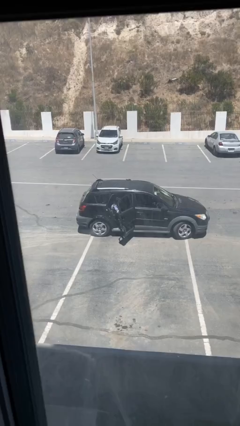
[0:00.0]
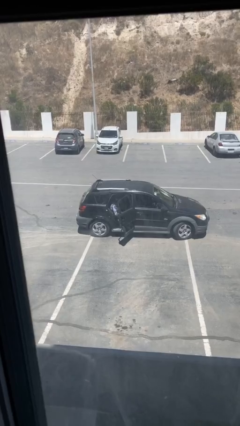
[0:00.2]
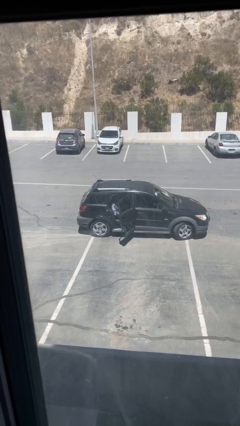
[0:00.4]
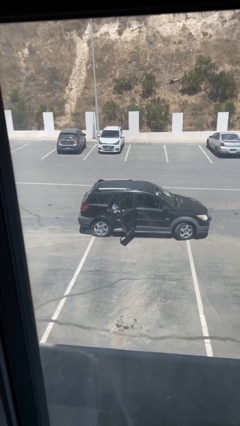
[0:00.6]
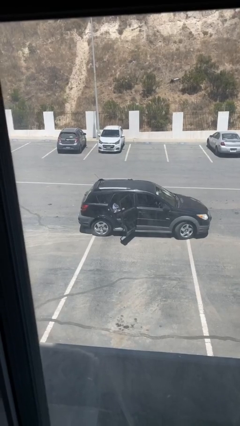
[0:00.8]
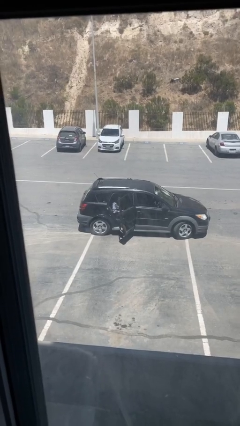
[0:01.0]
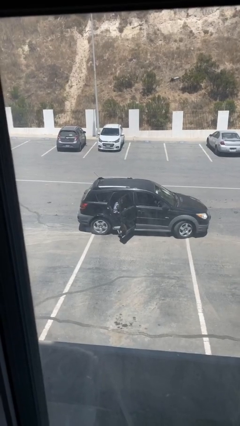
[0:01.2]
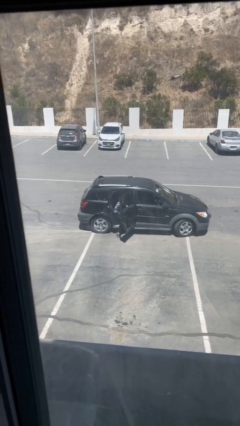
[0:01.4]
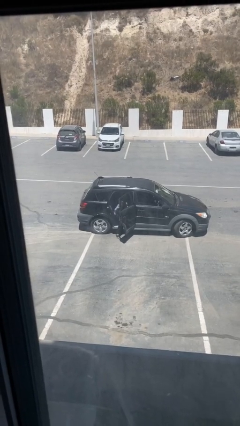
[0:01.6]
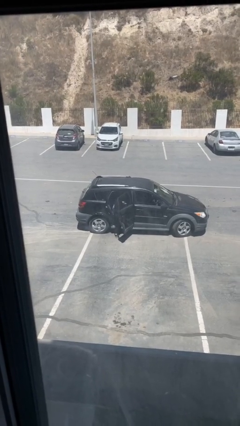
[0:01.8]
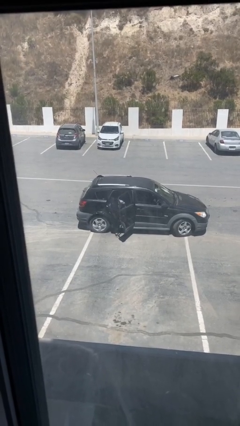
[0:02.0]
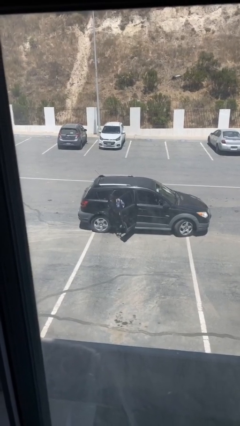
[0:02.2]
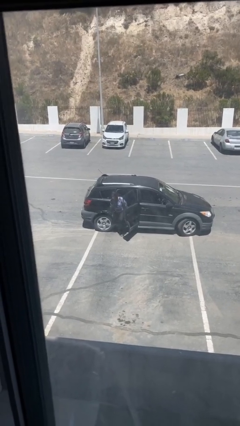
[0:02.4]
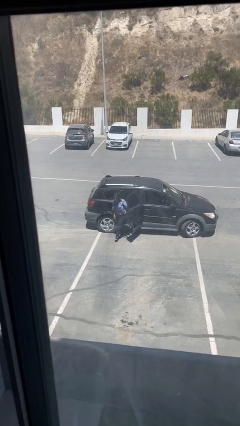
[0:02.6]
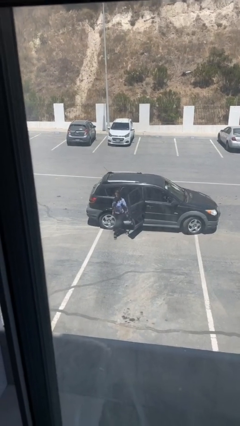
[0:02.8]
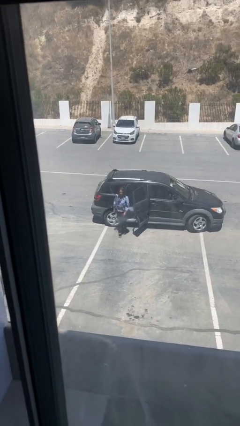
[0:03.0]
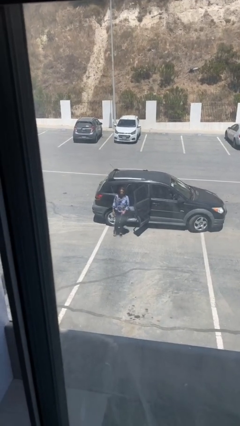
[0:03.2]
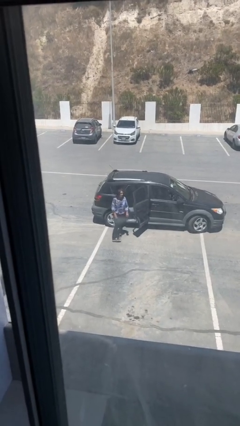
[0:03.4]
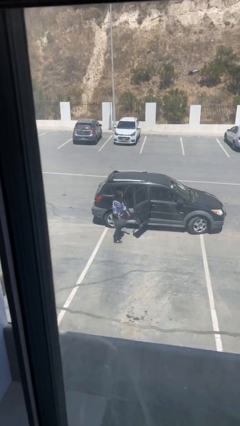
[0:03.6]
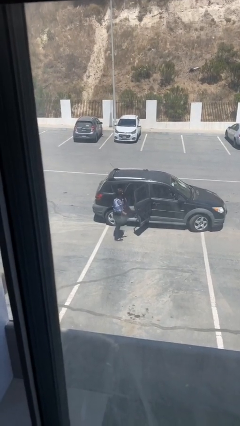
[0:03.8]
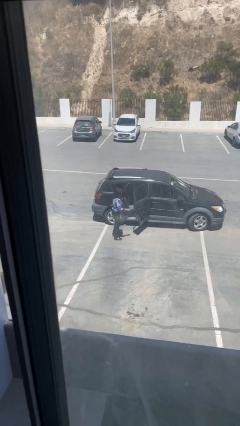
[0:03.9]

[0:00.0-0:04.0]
person exits car

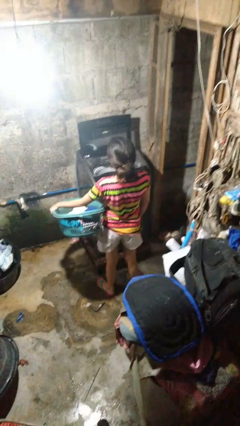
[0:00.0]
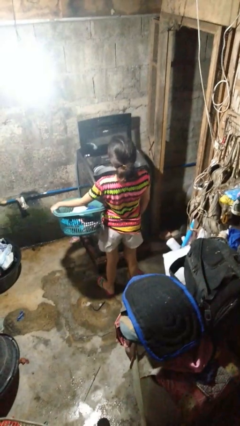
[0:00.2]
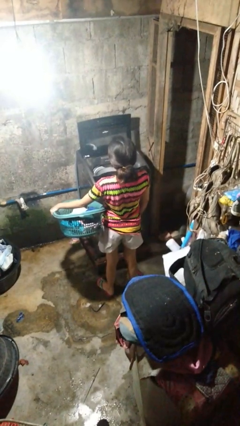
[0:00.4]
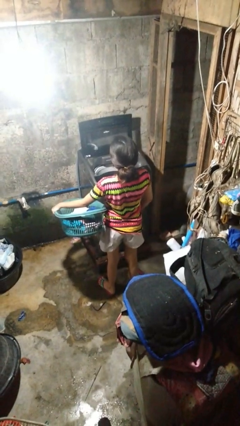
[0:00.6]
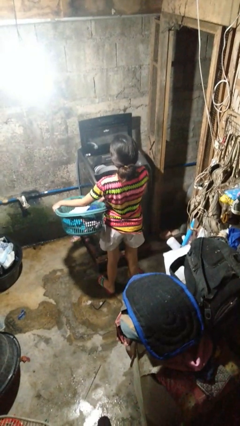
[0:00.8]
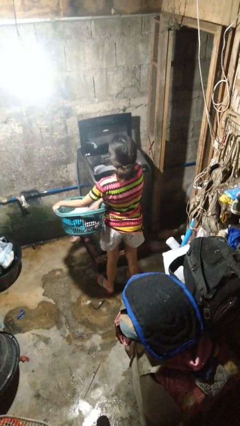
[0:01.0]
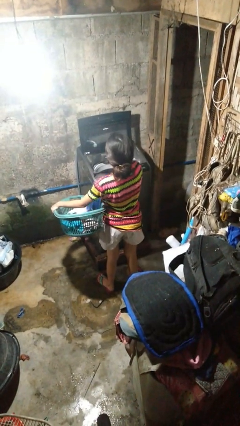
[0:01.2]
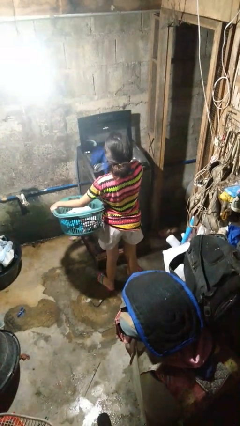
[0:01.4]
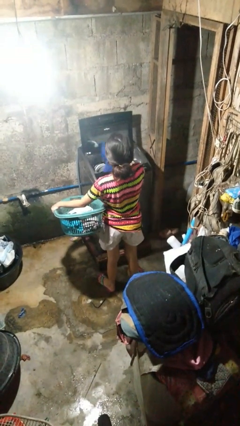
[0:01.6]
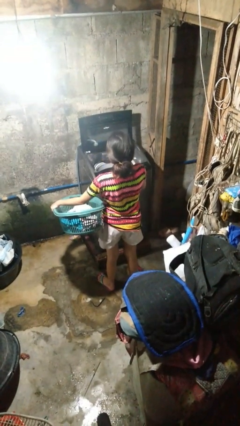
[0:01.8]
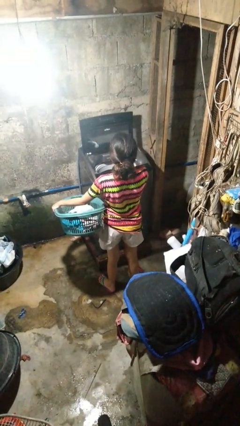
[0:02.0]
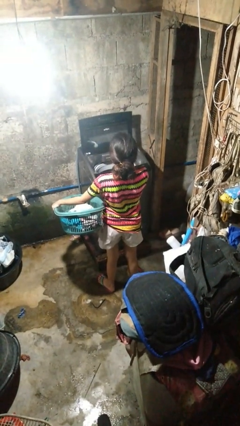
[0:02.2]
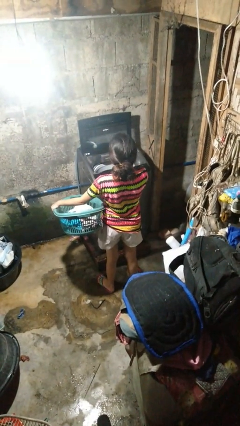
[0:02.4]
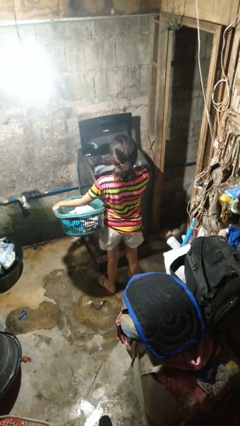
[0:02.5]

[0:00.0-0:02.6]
person loads clotheswasher

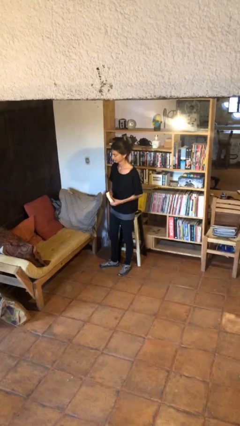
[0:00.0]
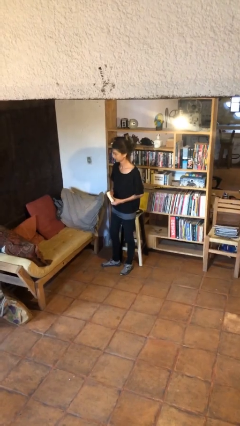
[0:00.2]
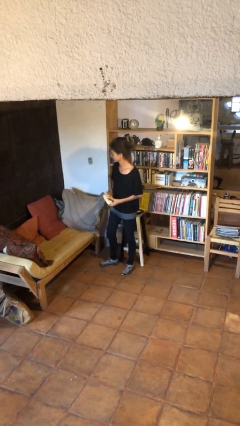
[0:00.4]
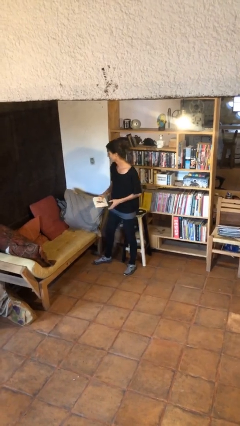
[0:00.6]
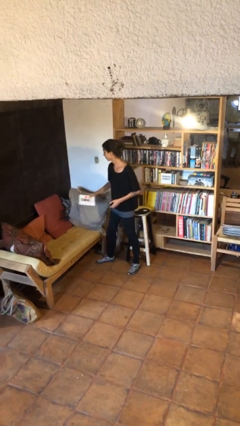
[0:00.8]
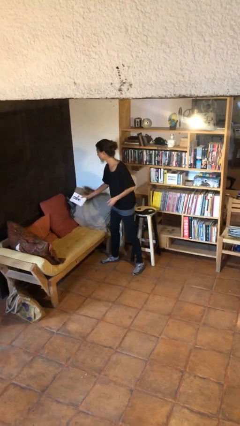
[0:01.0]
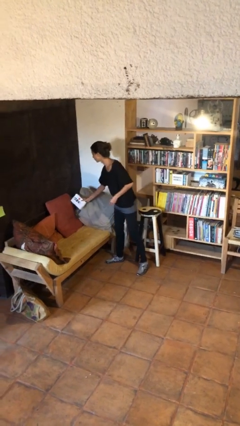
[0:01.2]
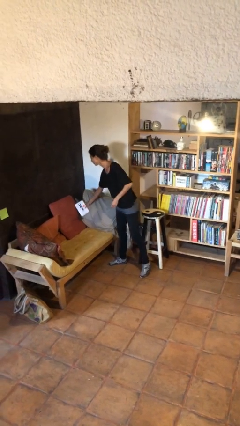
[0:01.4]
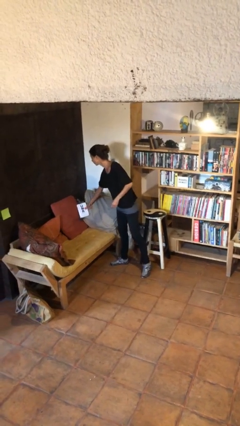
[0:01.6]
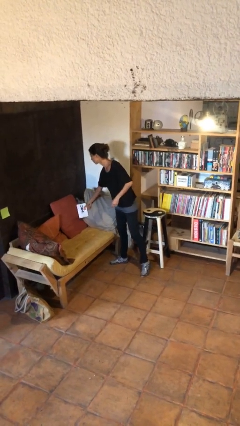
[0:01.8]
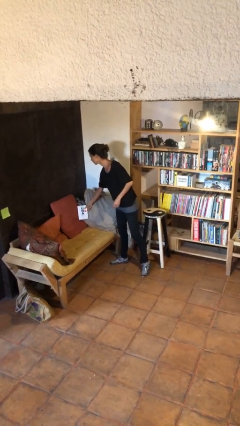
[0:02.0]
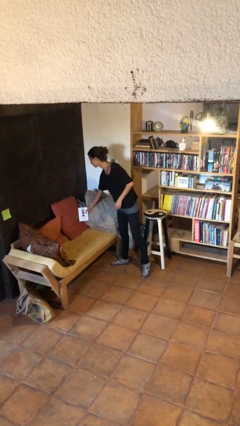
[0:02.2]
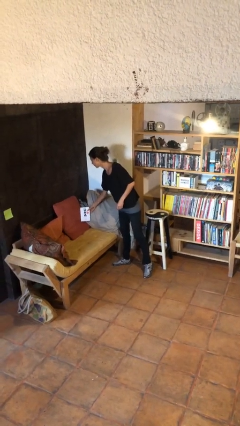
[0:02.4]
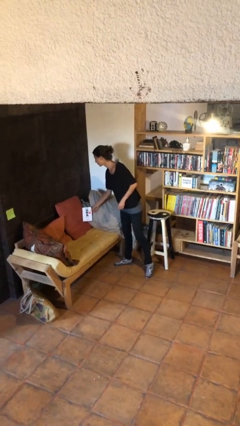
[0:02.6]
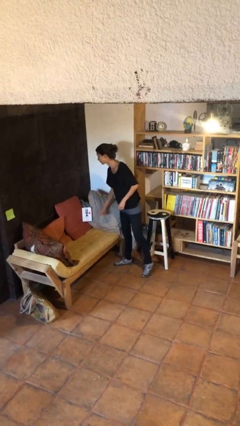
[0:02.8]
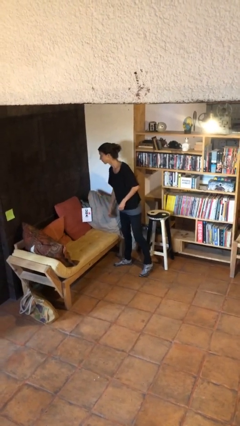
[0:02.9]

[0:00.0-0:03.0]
person puts down object on couch

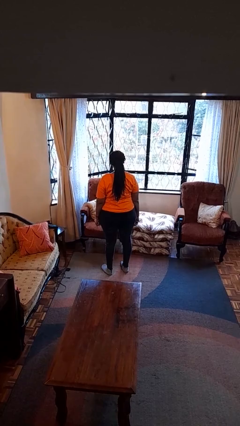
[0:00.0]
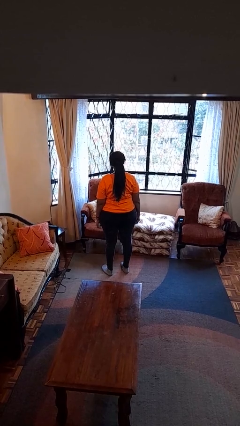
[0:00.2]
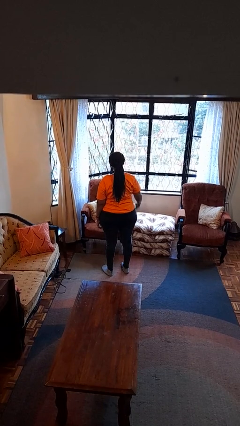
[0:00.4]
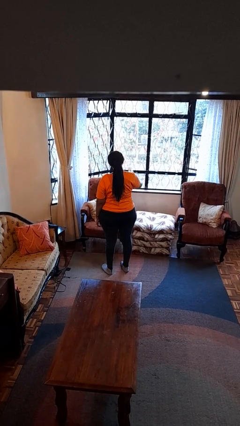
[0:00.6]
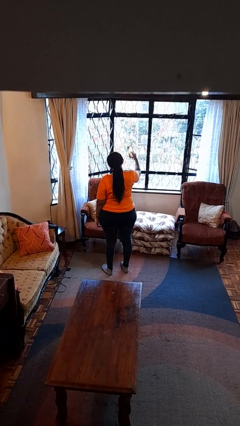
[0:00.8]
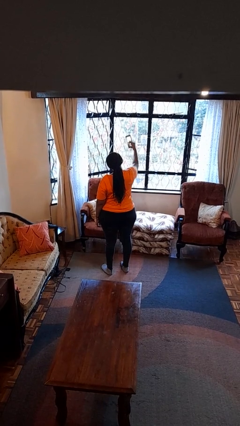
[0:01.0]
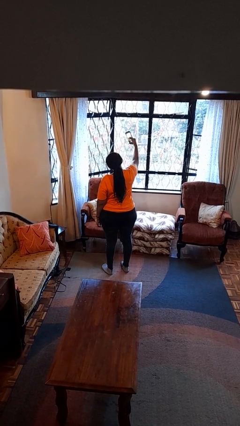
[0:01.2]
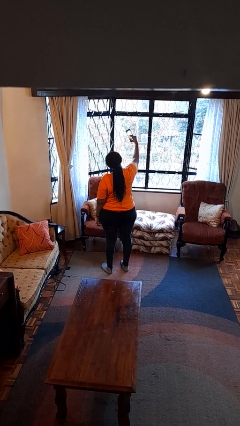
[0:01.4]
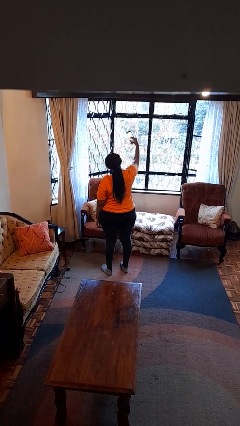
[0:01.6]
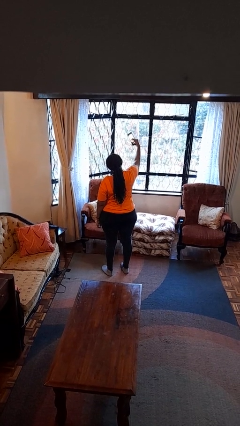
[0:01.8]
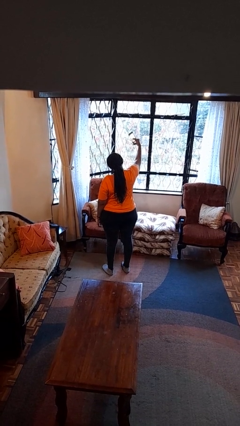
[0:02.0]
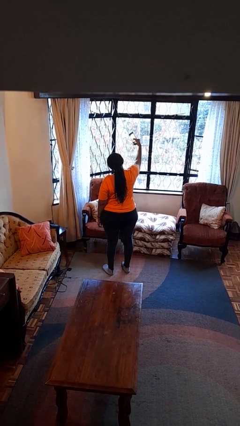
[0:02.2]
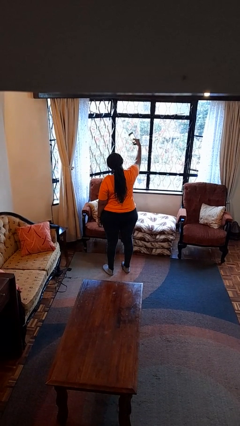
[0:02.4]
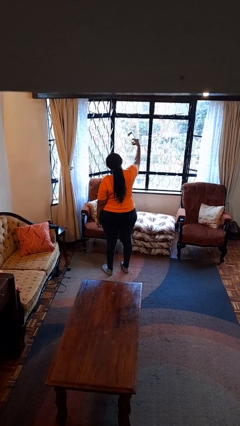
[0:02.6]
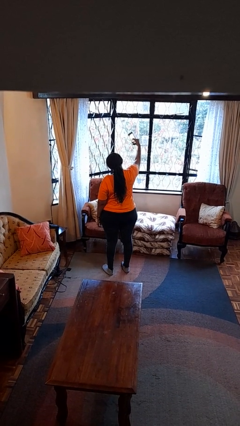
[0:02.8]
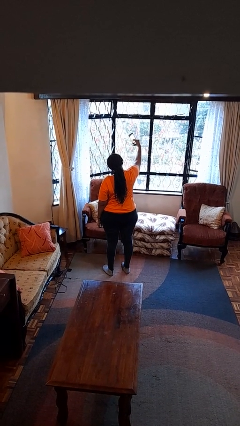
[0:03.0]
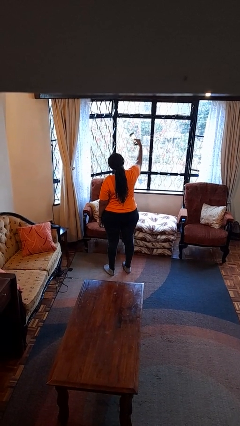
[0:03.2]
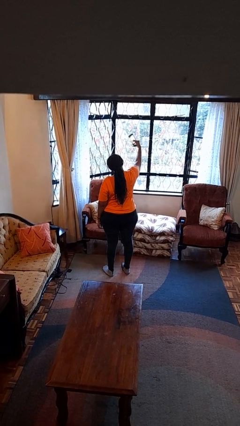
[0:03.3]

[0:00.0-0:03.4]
person takes selfie

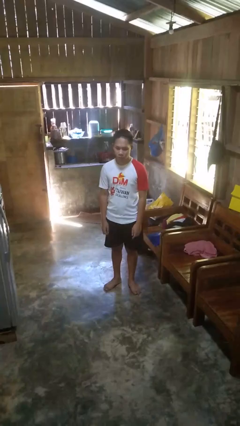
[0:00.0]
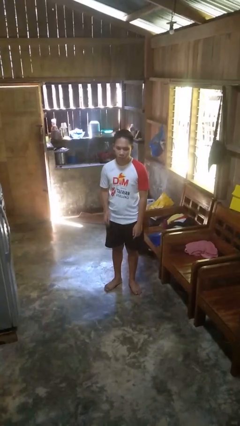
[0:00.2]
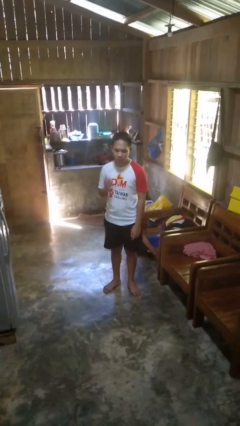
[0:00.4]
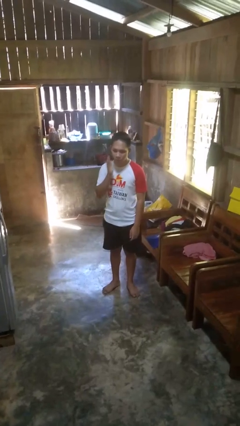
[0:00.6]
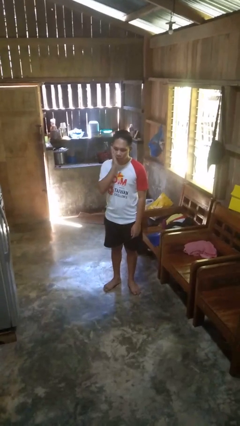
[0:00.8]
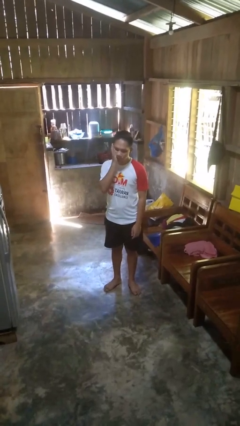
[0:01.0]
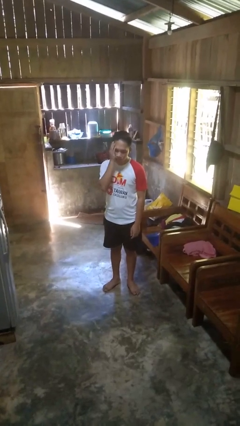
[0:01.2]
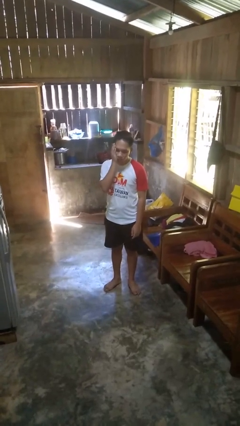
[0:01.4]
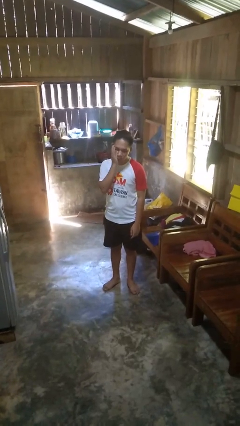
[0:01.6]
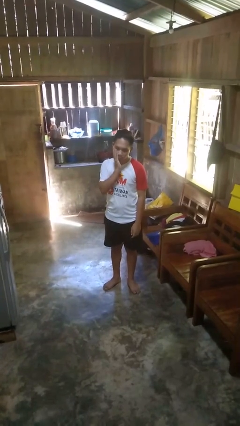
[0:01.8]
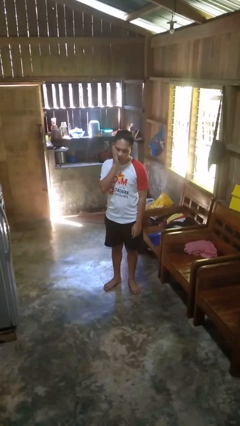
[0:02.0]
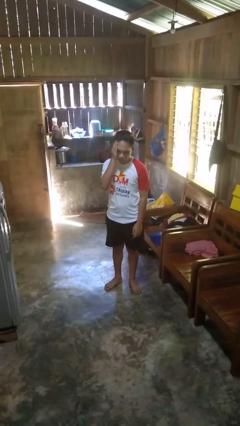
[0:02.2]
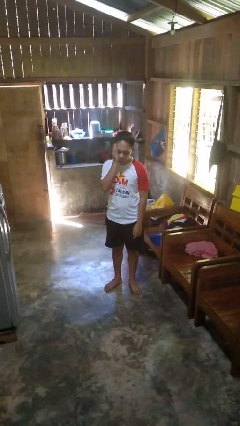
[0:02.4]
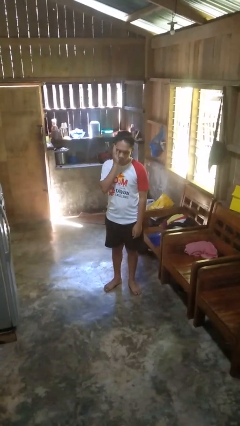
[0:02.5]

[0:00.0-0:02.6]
person scratches face

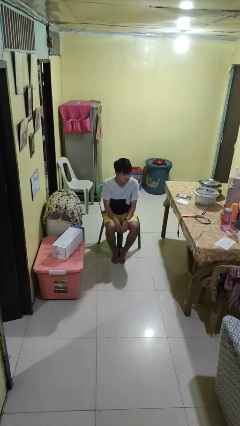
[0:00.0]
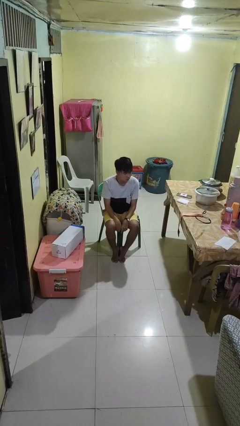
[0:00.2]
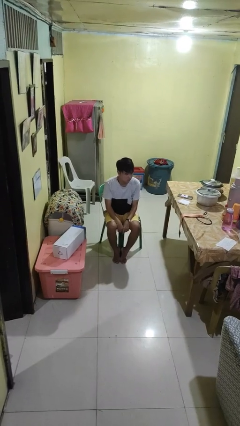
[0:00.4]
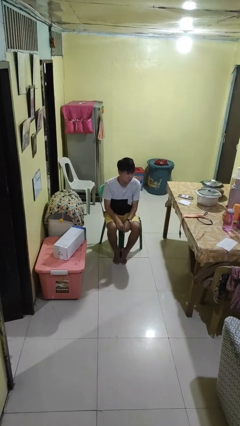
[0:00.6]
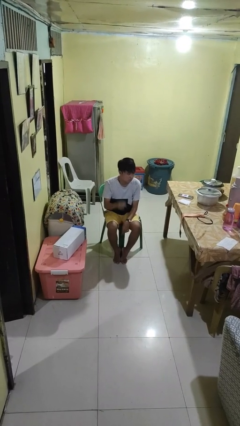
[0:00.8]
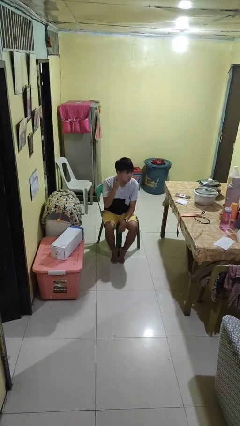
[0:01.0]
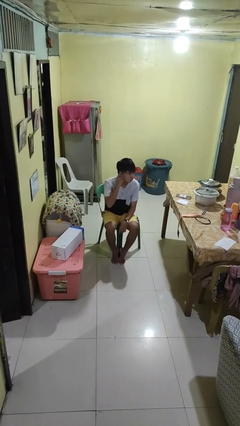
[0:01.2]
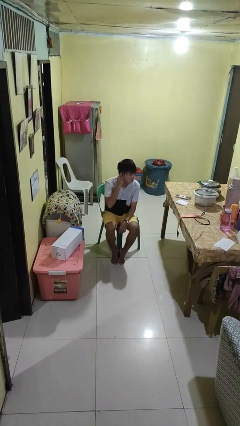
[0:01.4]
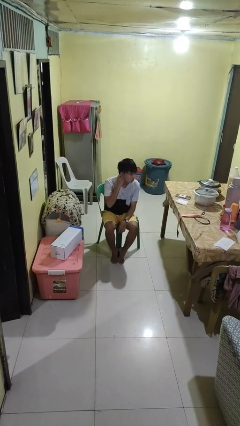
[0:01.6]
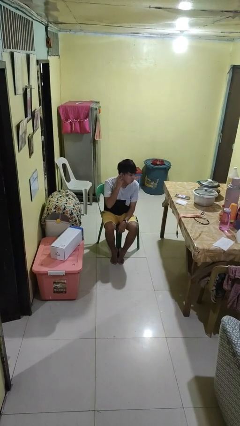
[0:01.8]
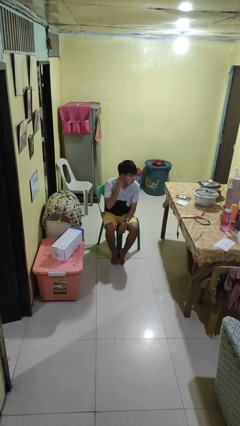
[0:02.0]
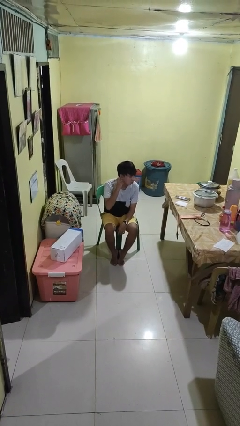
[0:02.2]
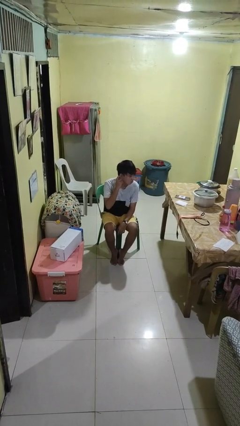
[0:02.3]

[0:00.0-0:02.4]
person gestures listen closely
